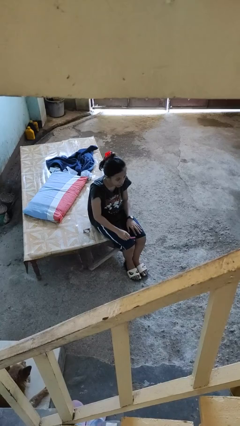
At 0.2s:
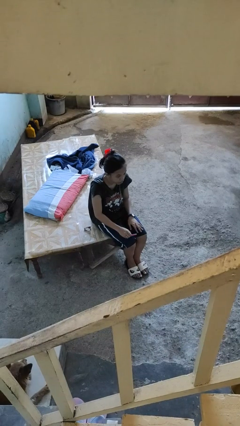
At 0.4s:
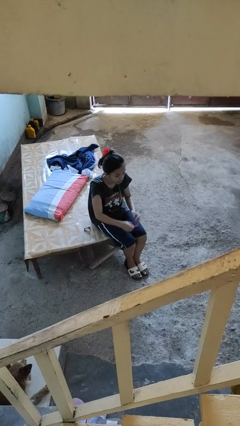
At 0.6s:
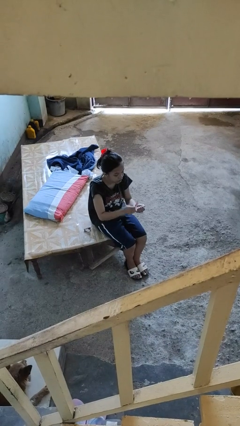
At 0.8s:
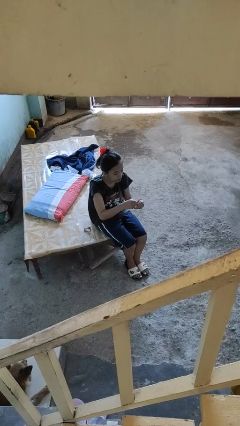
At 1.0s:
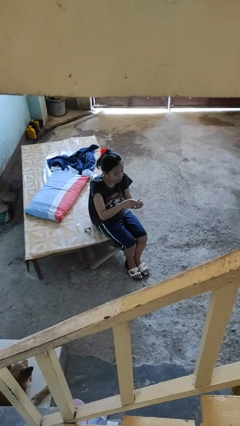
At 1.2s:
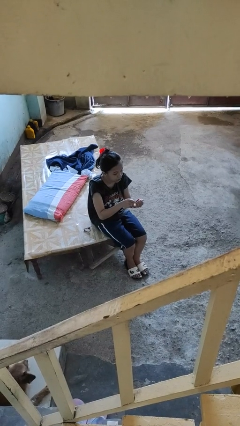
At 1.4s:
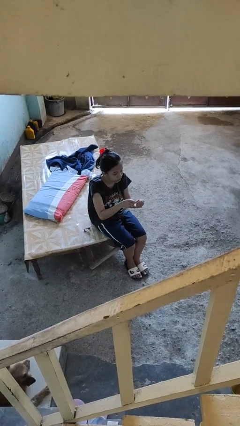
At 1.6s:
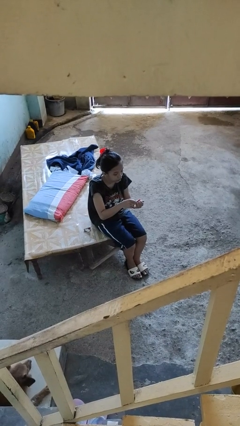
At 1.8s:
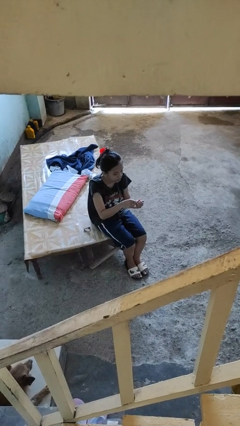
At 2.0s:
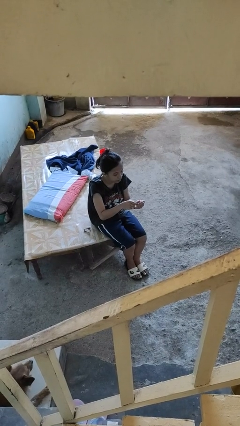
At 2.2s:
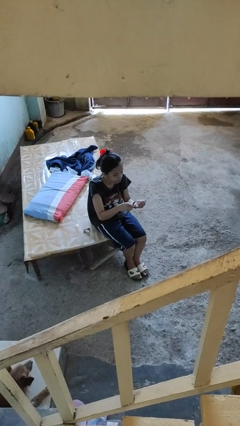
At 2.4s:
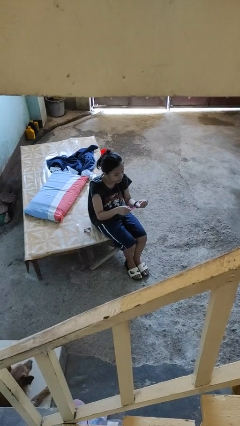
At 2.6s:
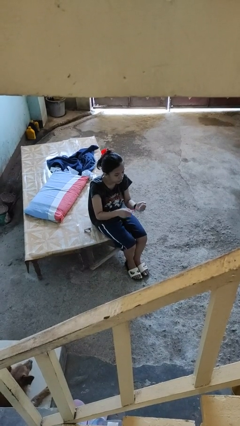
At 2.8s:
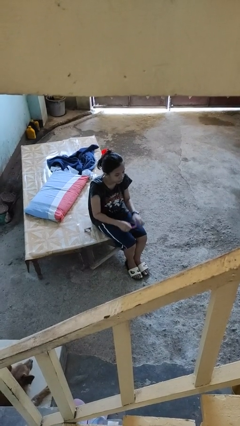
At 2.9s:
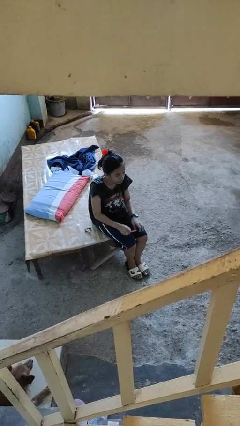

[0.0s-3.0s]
person files fingernails

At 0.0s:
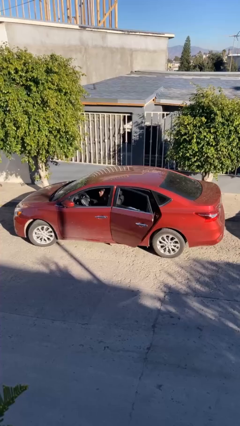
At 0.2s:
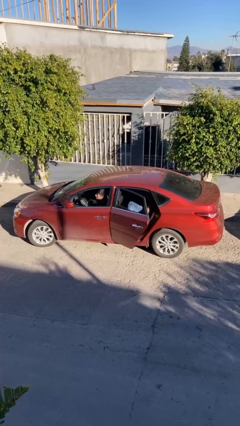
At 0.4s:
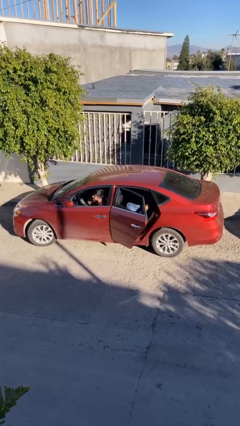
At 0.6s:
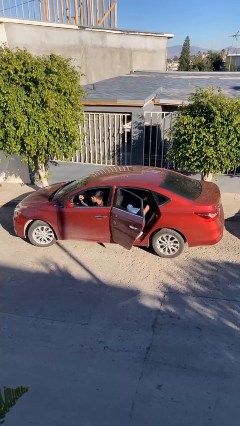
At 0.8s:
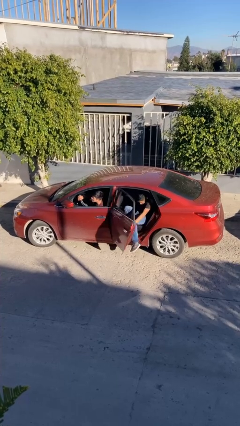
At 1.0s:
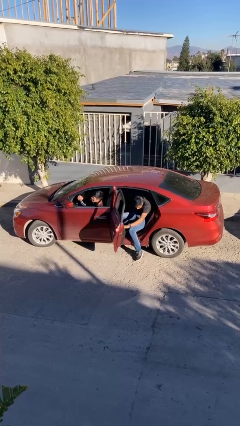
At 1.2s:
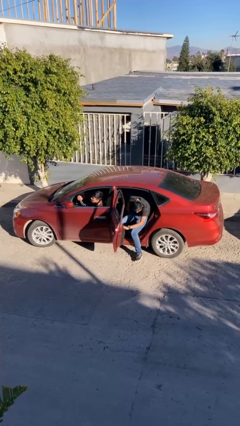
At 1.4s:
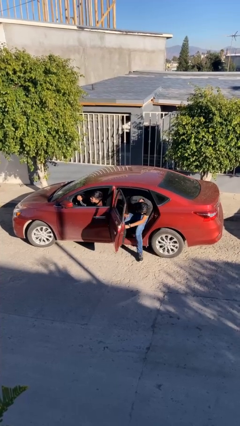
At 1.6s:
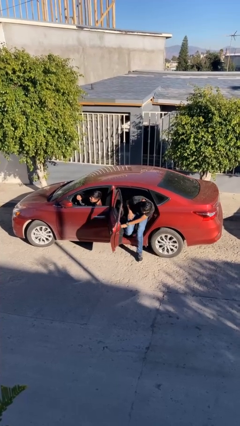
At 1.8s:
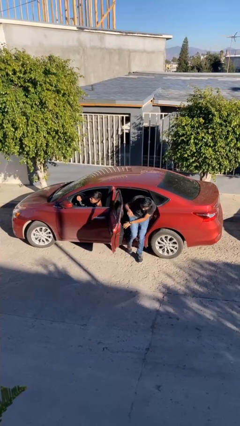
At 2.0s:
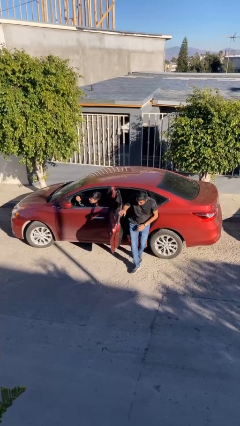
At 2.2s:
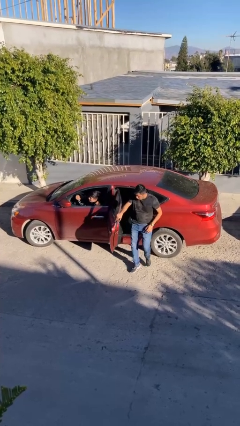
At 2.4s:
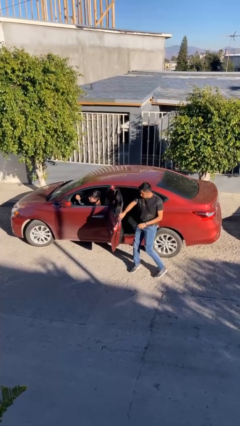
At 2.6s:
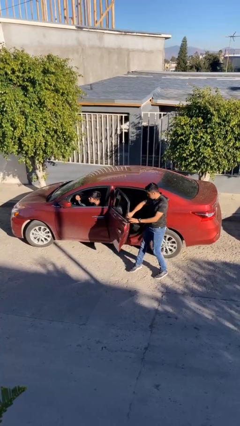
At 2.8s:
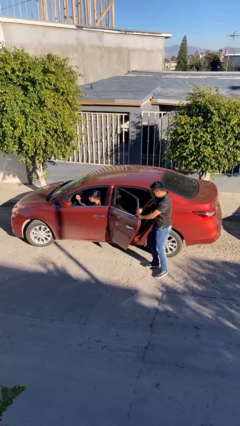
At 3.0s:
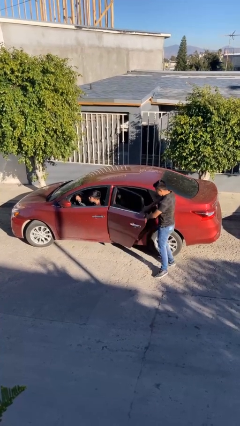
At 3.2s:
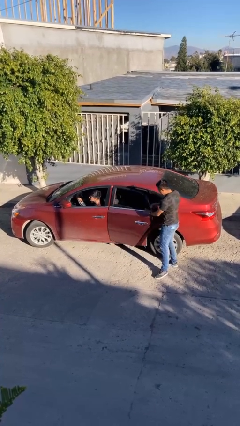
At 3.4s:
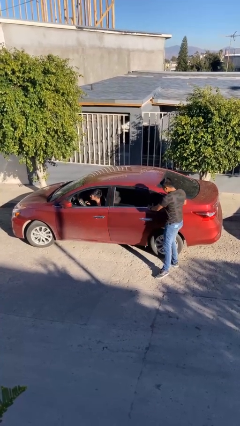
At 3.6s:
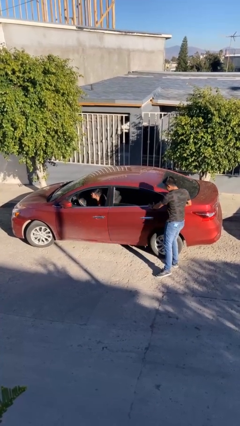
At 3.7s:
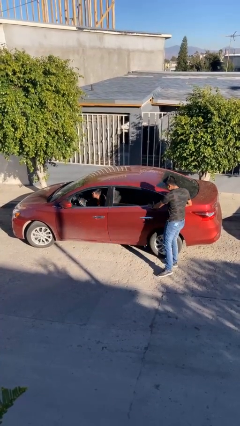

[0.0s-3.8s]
car drops off person

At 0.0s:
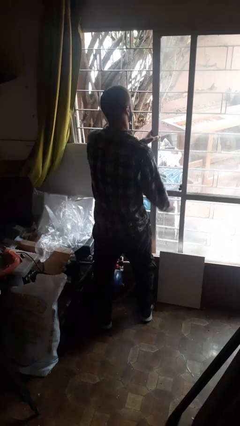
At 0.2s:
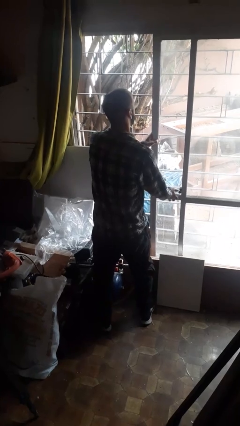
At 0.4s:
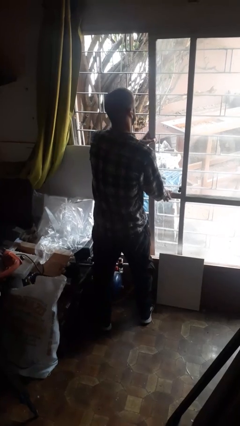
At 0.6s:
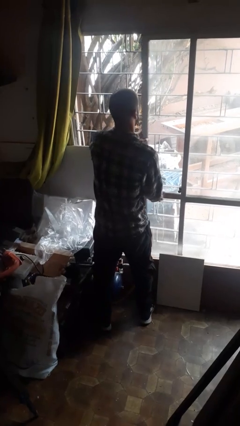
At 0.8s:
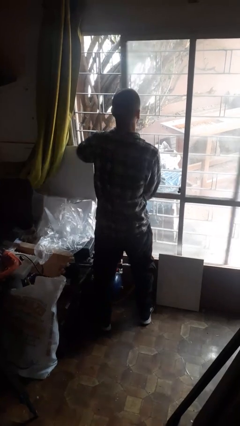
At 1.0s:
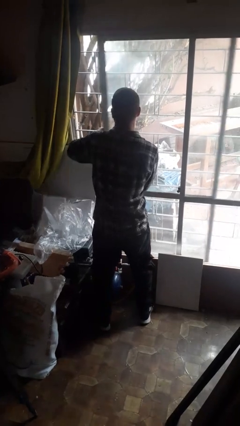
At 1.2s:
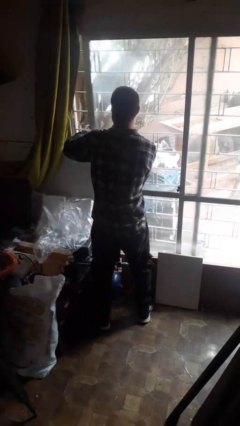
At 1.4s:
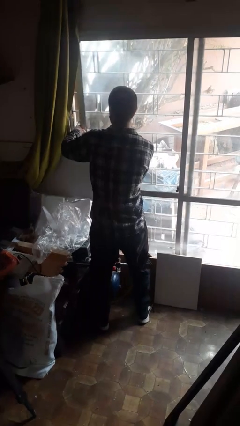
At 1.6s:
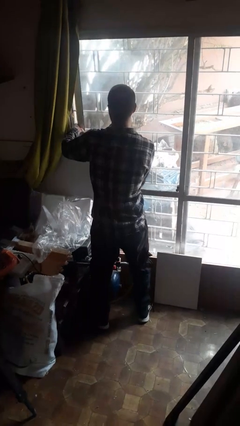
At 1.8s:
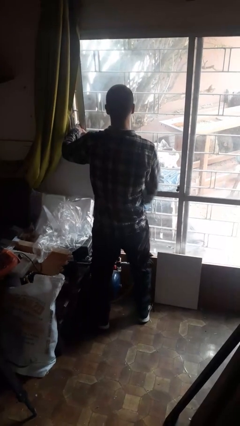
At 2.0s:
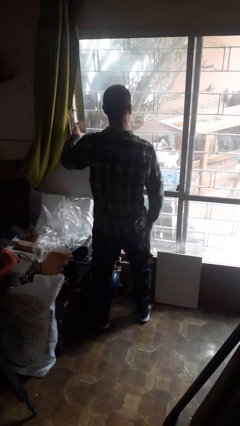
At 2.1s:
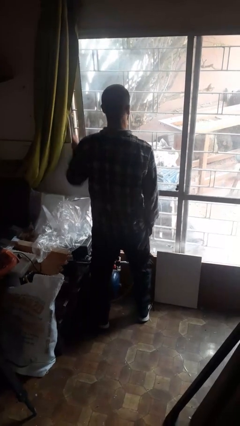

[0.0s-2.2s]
person closes sliding door

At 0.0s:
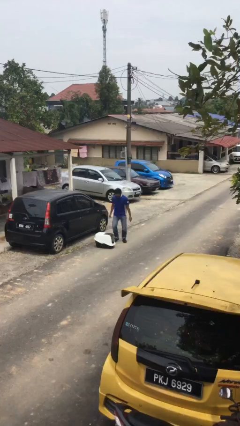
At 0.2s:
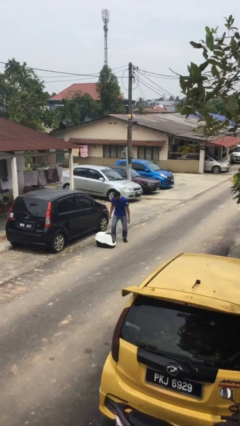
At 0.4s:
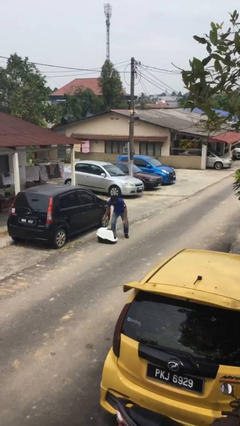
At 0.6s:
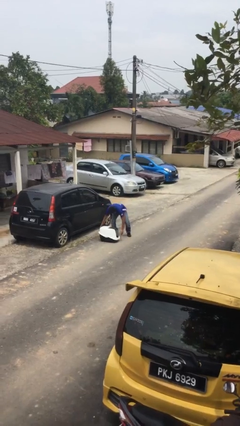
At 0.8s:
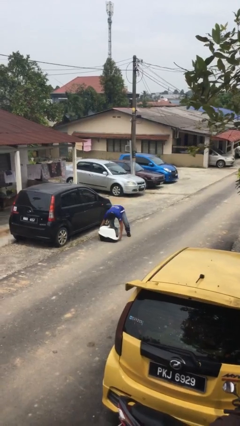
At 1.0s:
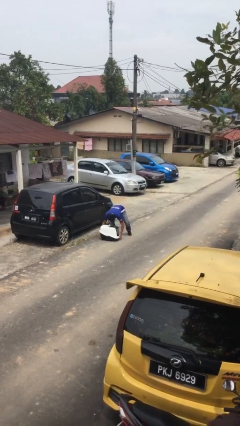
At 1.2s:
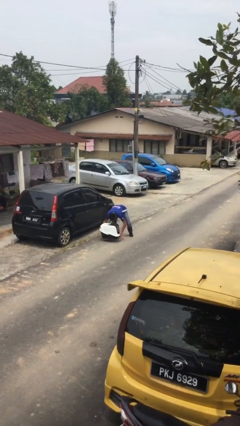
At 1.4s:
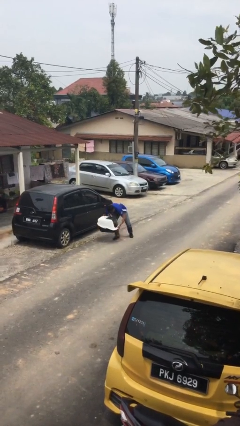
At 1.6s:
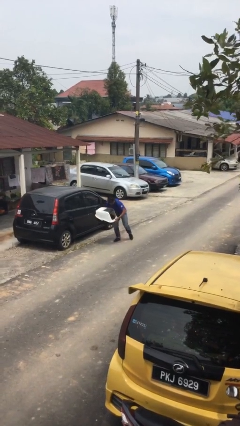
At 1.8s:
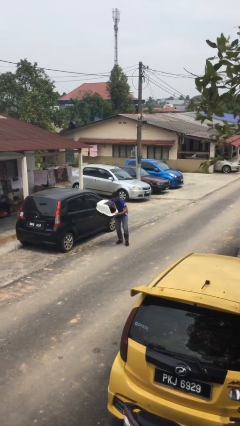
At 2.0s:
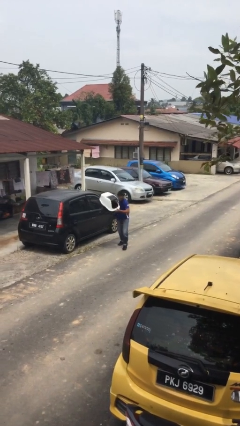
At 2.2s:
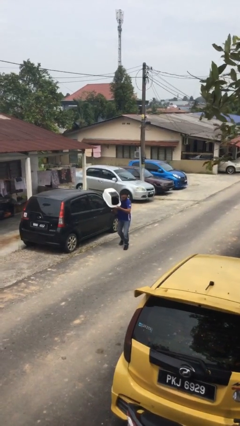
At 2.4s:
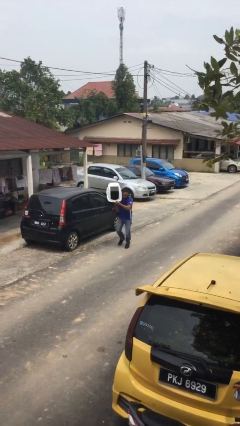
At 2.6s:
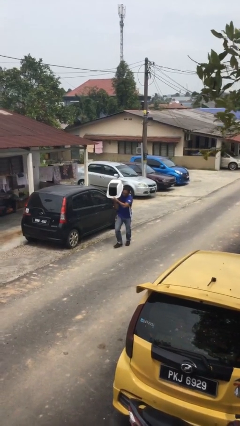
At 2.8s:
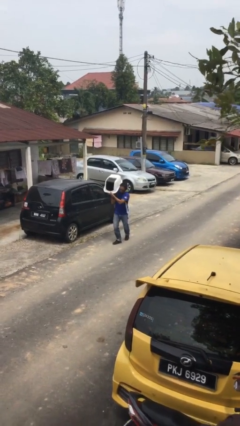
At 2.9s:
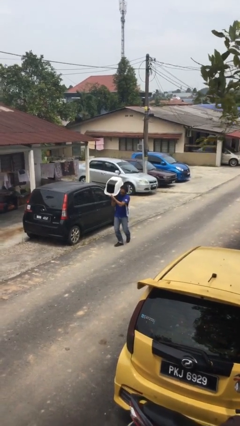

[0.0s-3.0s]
person picks up object from floor

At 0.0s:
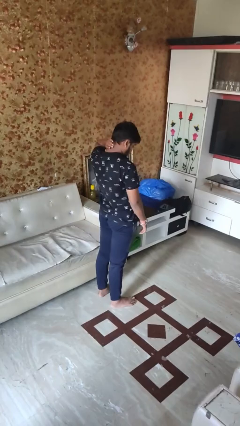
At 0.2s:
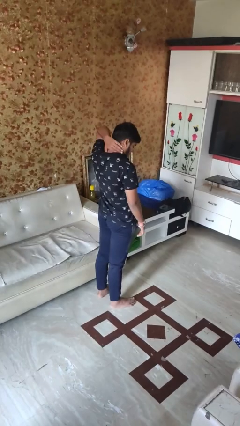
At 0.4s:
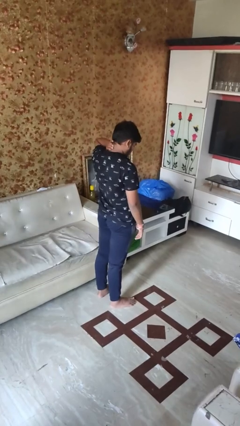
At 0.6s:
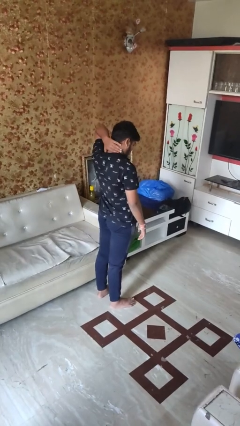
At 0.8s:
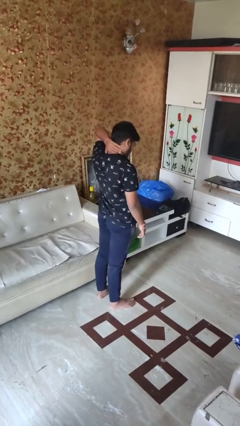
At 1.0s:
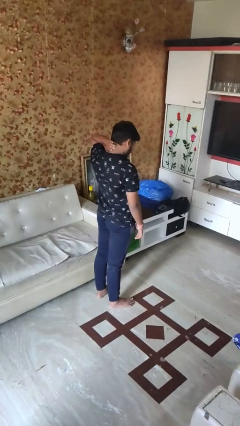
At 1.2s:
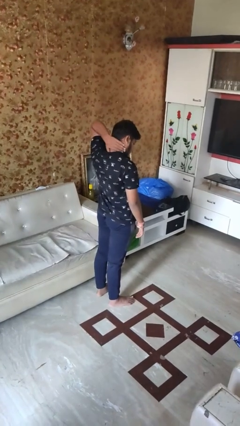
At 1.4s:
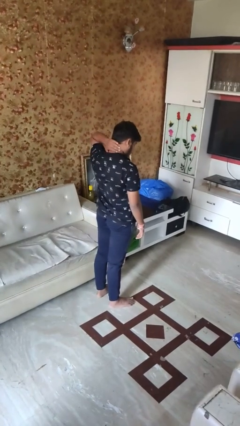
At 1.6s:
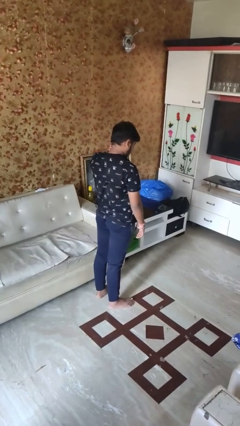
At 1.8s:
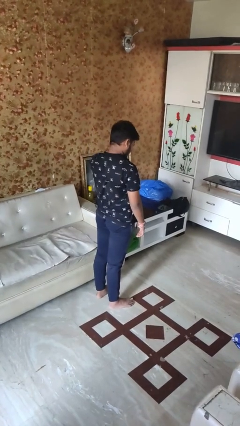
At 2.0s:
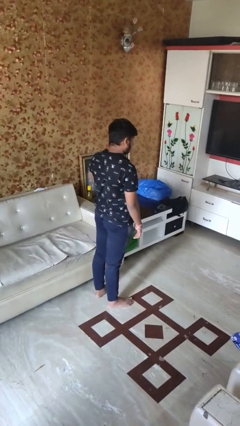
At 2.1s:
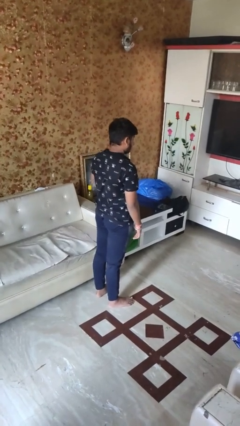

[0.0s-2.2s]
person rubs neck

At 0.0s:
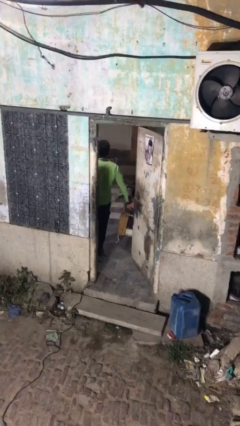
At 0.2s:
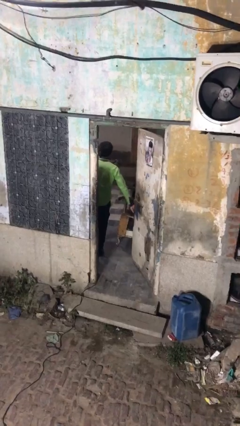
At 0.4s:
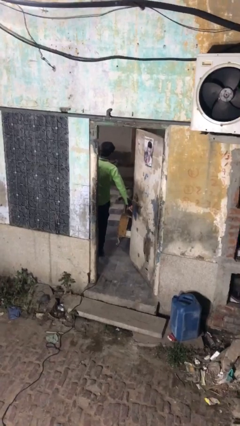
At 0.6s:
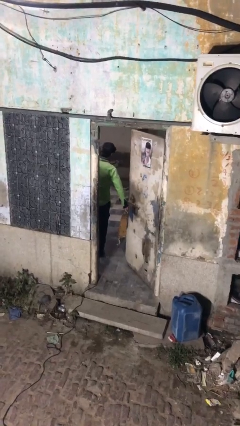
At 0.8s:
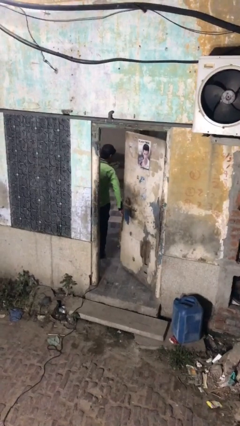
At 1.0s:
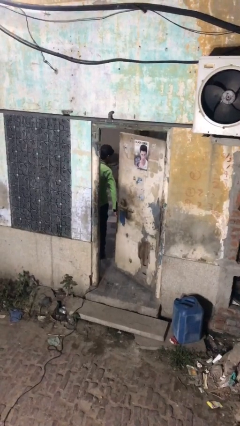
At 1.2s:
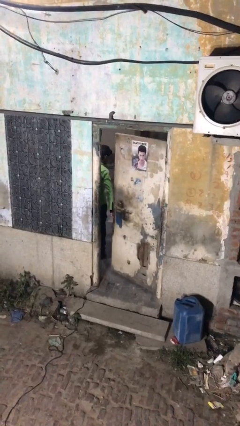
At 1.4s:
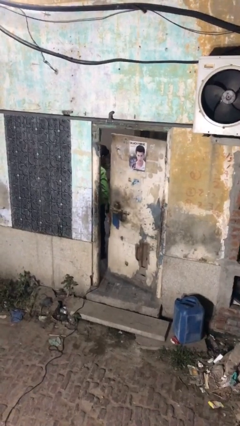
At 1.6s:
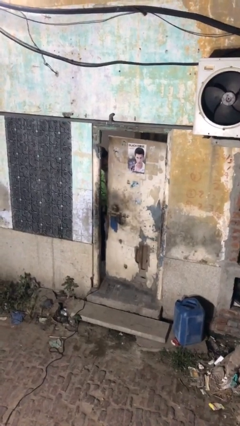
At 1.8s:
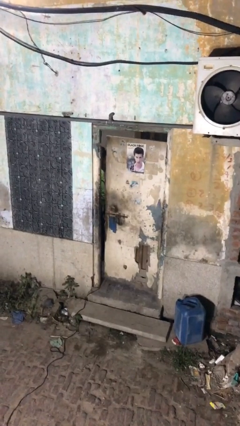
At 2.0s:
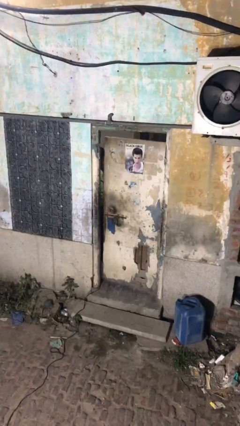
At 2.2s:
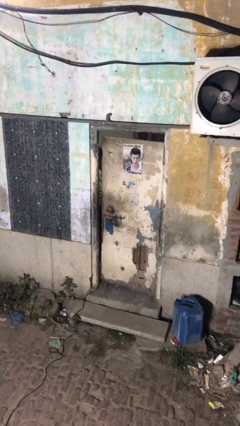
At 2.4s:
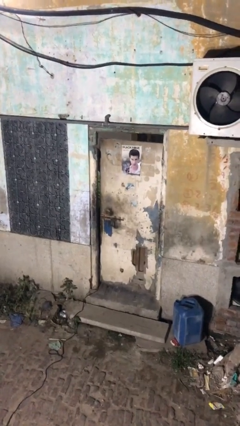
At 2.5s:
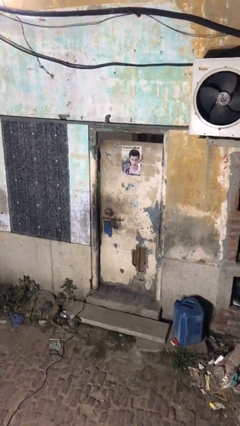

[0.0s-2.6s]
person closes facility door

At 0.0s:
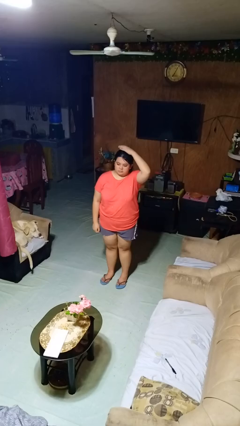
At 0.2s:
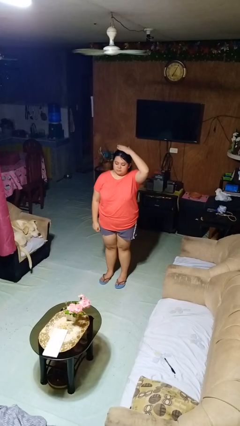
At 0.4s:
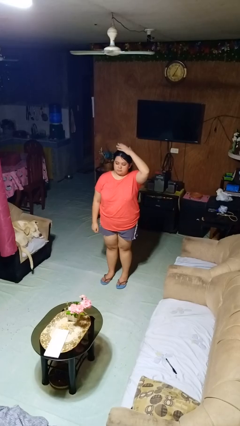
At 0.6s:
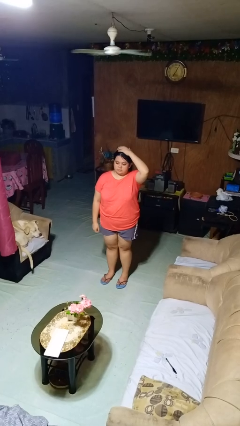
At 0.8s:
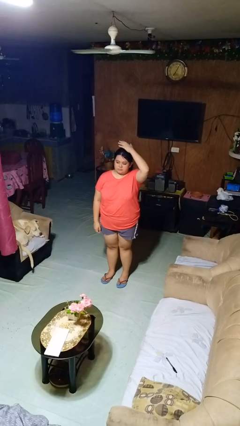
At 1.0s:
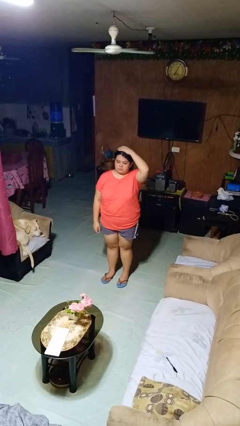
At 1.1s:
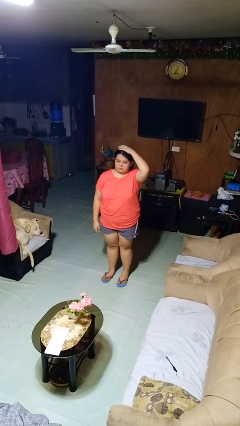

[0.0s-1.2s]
person pats head
